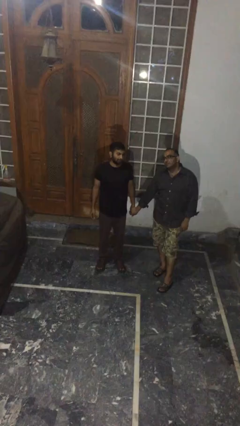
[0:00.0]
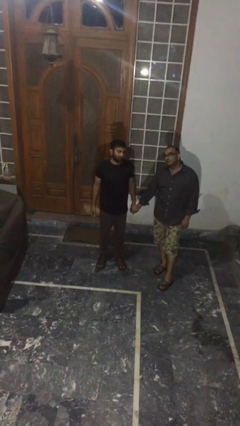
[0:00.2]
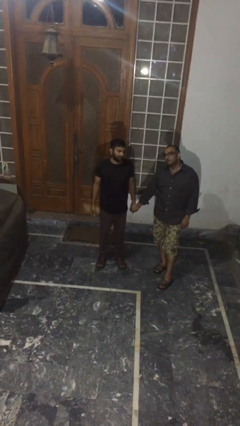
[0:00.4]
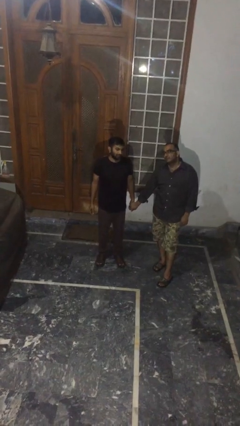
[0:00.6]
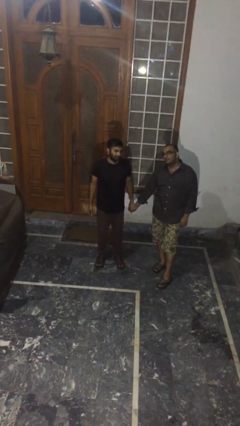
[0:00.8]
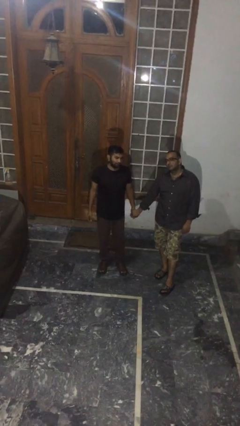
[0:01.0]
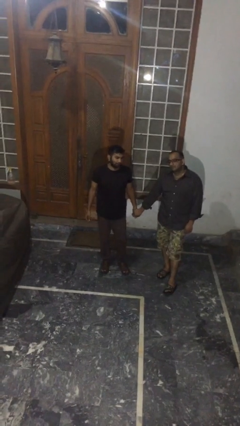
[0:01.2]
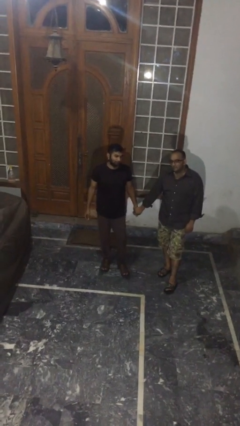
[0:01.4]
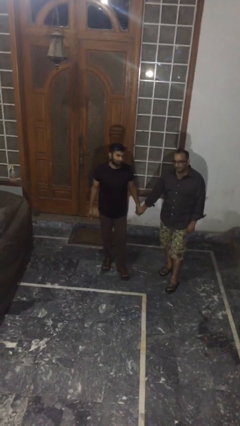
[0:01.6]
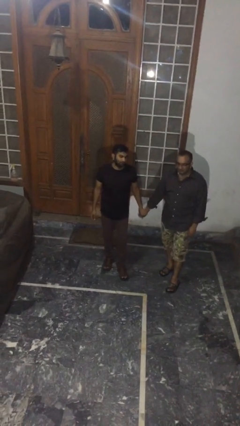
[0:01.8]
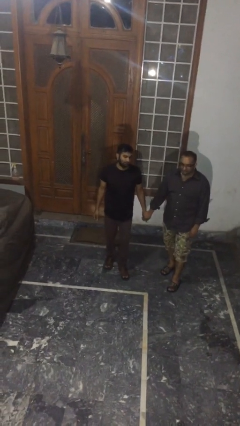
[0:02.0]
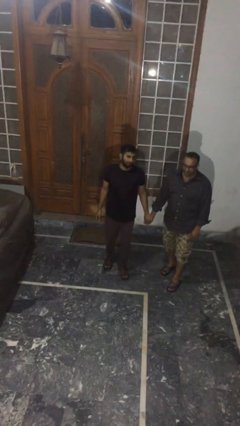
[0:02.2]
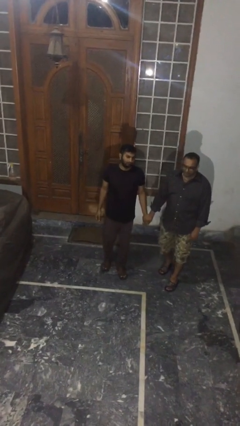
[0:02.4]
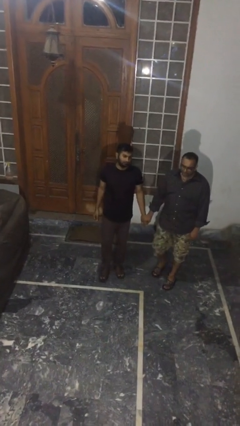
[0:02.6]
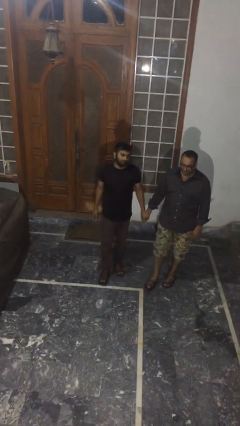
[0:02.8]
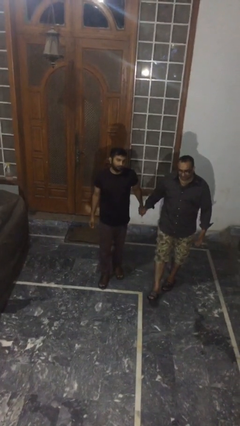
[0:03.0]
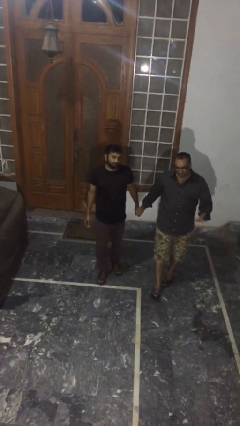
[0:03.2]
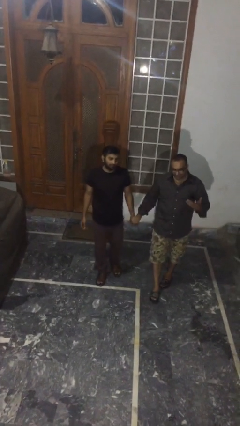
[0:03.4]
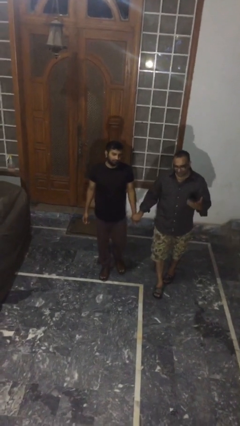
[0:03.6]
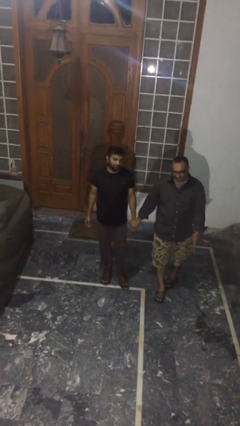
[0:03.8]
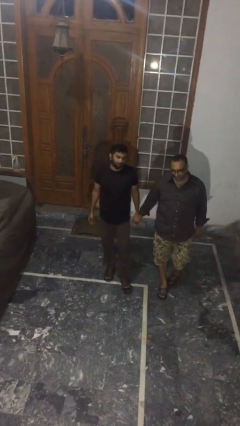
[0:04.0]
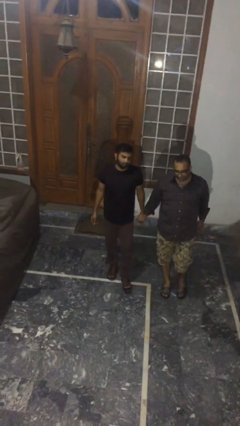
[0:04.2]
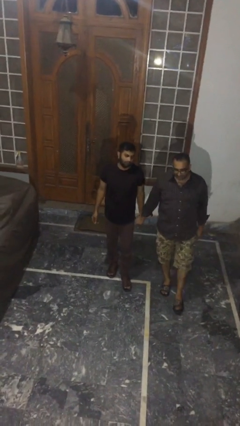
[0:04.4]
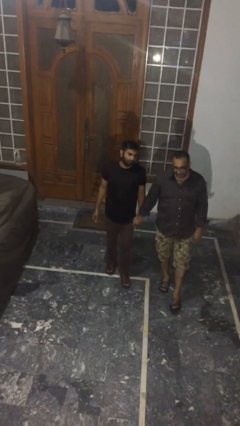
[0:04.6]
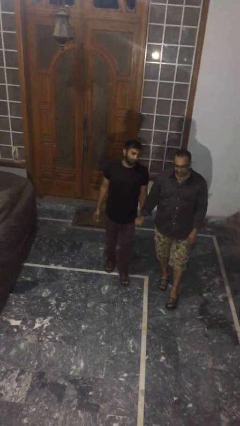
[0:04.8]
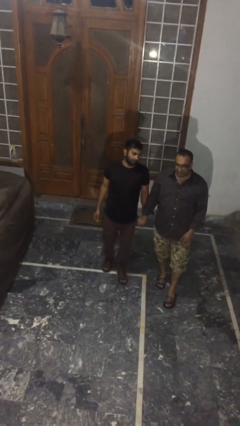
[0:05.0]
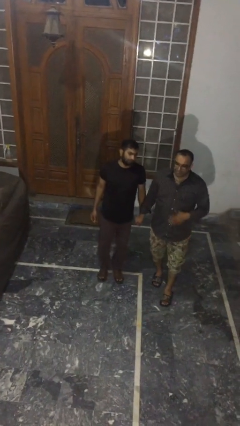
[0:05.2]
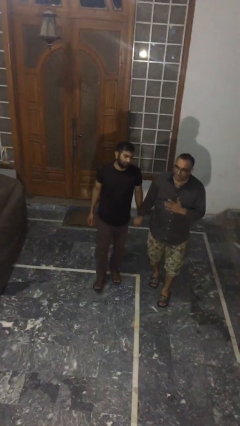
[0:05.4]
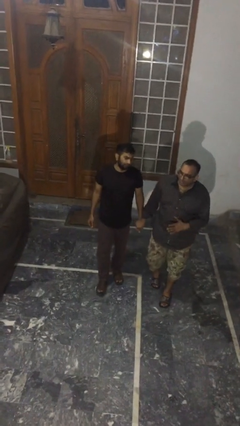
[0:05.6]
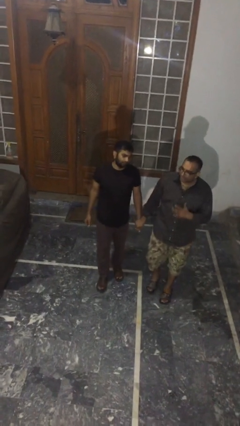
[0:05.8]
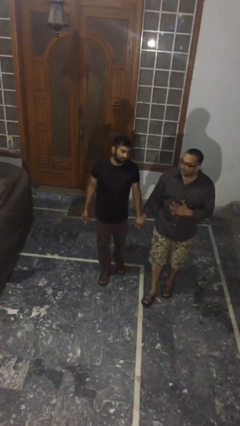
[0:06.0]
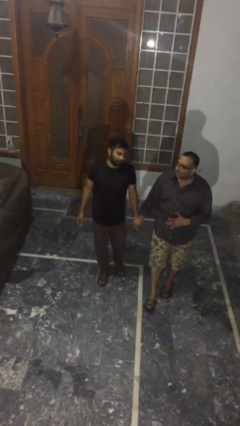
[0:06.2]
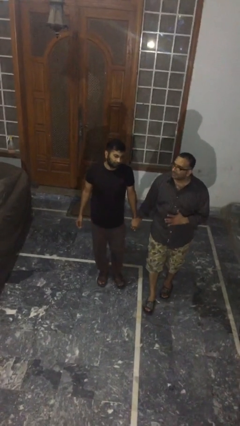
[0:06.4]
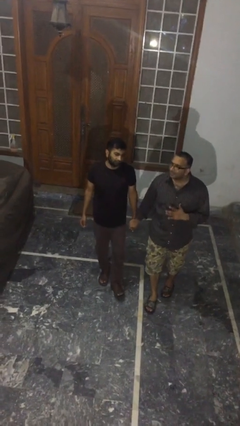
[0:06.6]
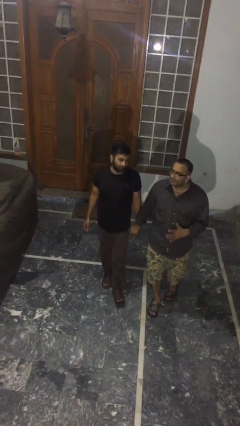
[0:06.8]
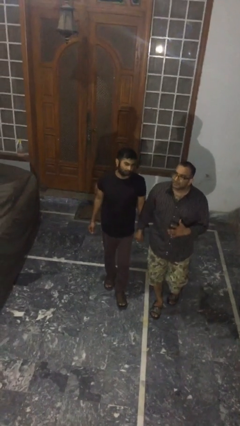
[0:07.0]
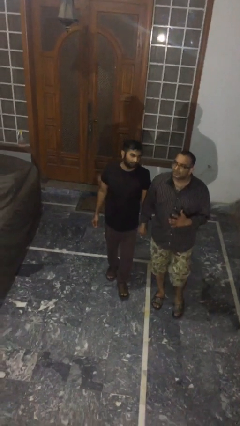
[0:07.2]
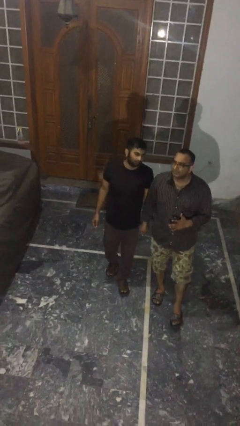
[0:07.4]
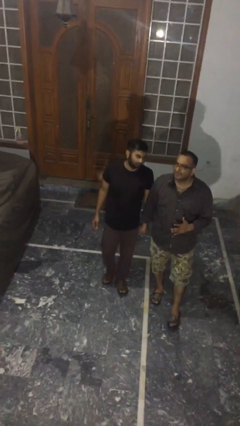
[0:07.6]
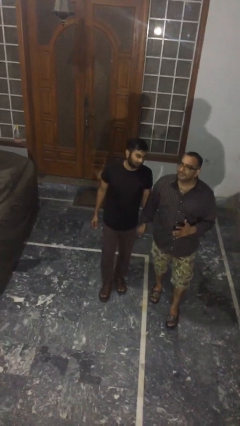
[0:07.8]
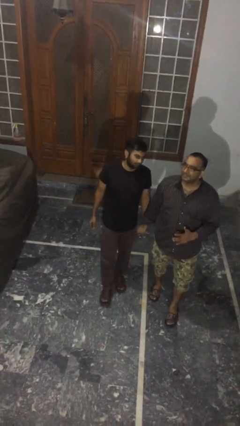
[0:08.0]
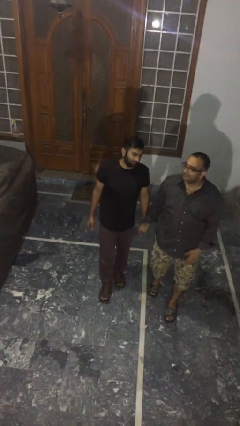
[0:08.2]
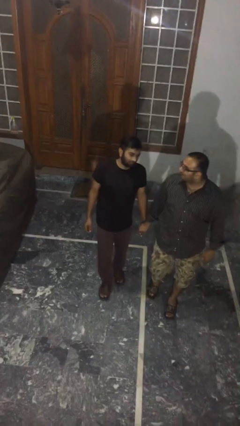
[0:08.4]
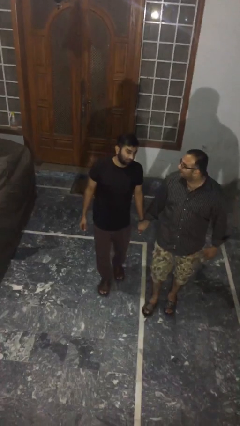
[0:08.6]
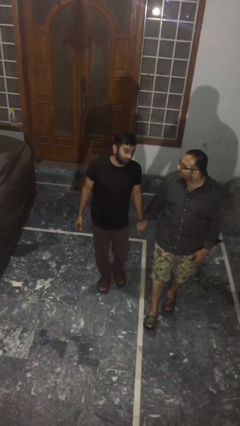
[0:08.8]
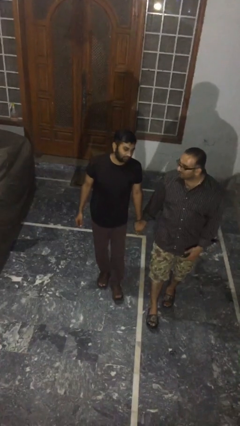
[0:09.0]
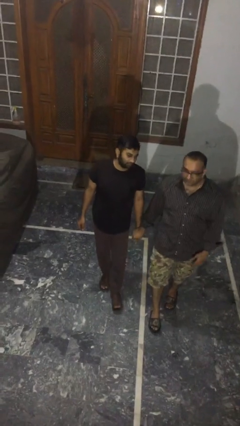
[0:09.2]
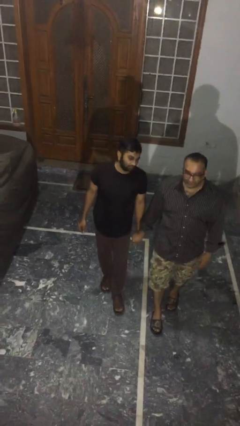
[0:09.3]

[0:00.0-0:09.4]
person holds hand

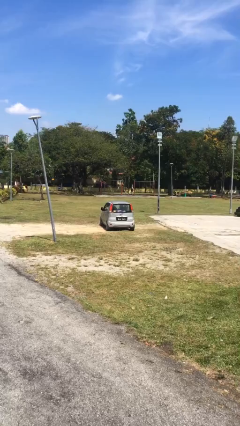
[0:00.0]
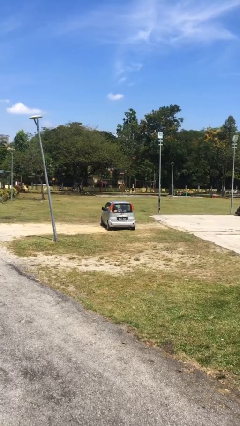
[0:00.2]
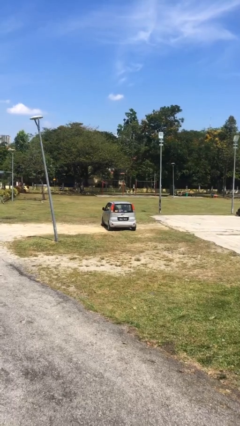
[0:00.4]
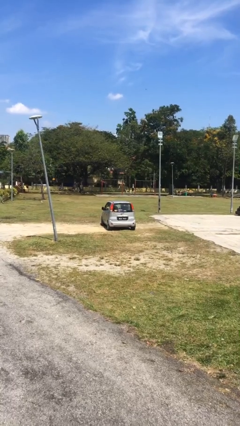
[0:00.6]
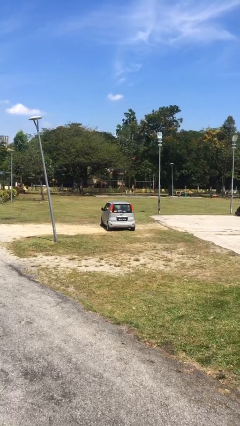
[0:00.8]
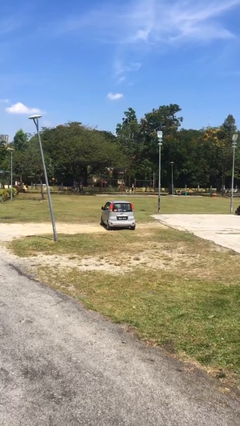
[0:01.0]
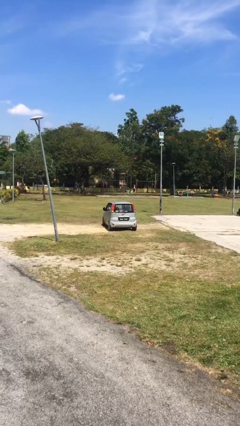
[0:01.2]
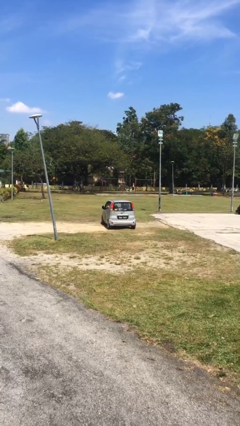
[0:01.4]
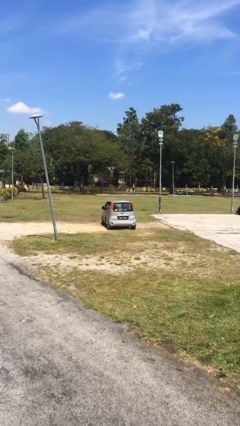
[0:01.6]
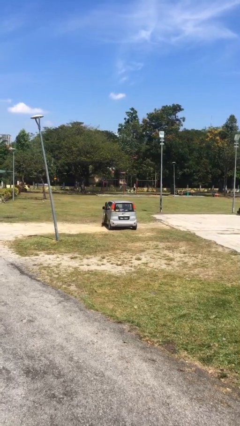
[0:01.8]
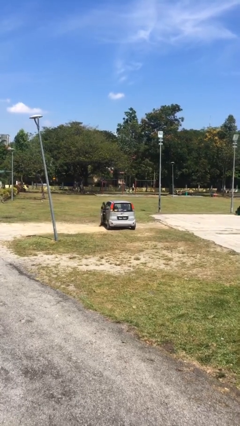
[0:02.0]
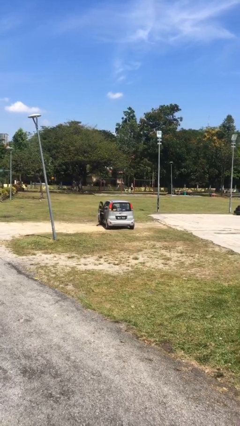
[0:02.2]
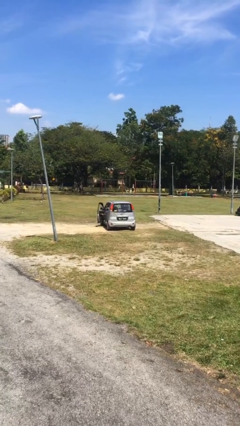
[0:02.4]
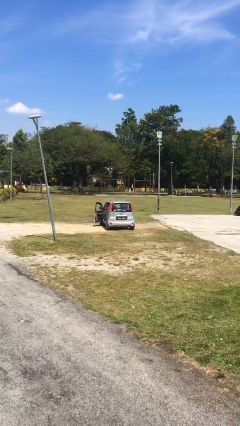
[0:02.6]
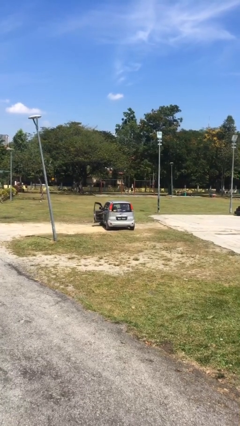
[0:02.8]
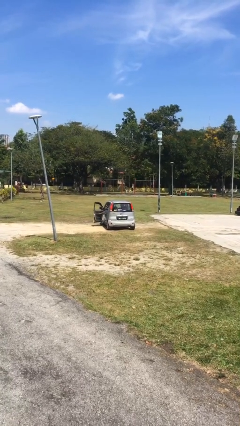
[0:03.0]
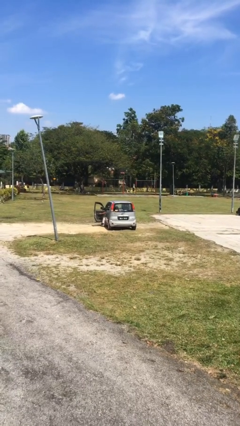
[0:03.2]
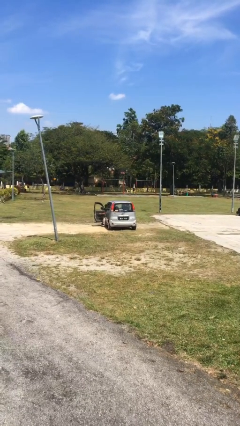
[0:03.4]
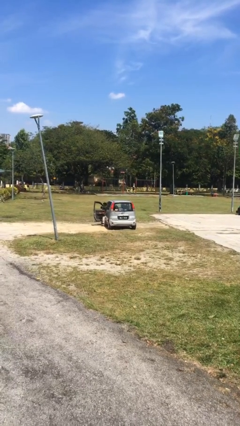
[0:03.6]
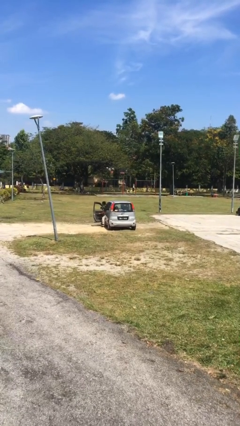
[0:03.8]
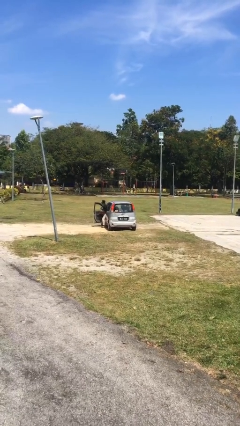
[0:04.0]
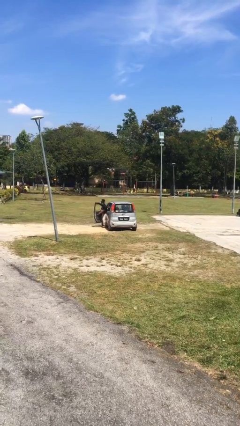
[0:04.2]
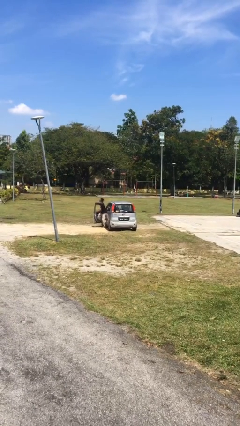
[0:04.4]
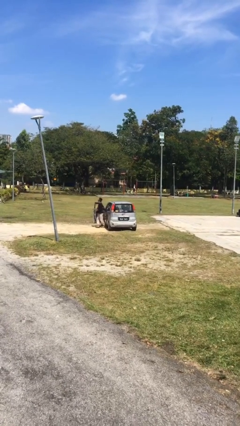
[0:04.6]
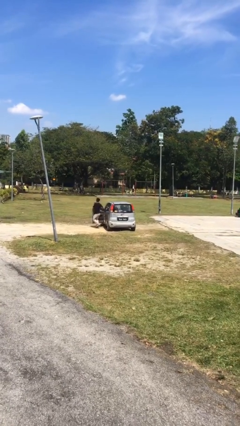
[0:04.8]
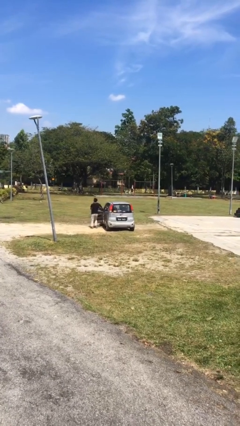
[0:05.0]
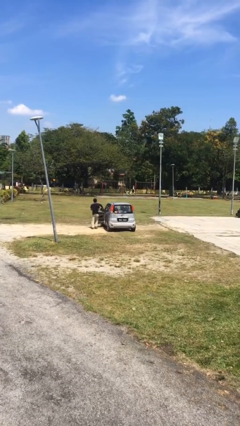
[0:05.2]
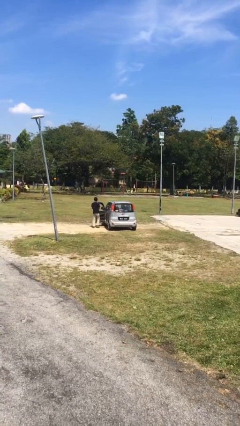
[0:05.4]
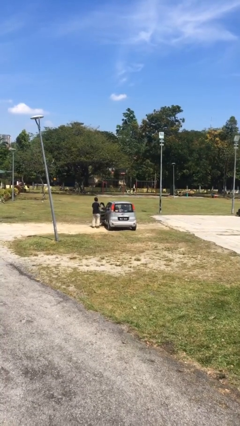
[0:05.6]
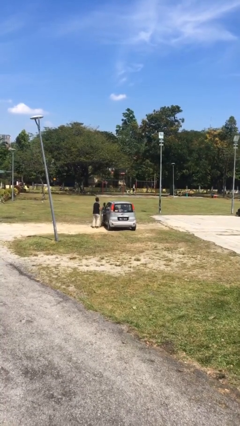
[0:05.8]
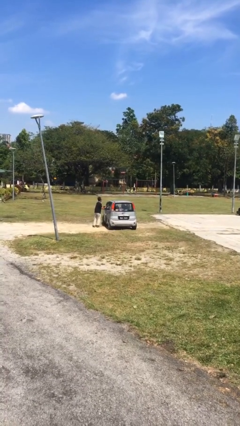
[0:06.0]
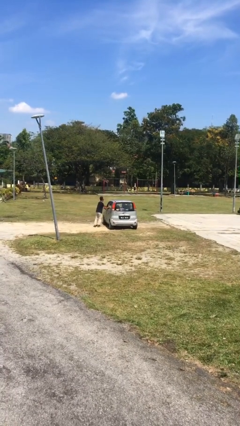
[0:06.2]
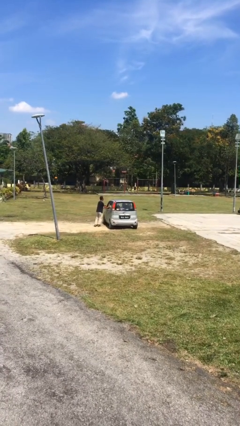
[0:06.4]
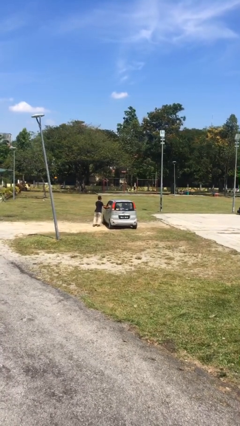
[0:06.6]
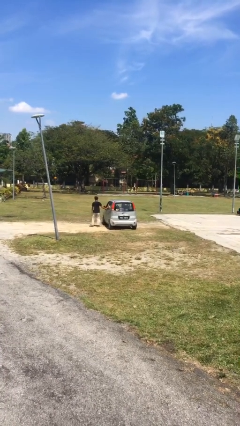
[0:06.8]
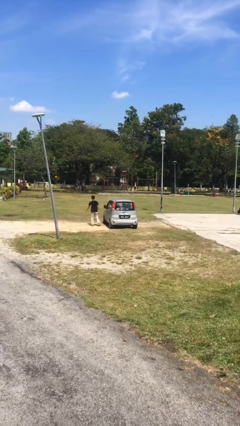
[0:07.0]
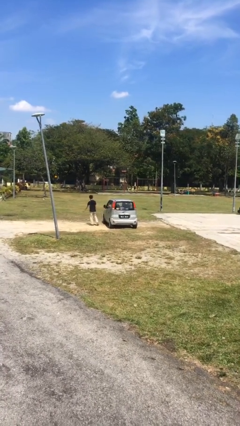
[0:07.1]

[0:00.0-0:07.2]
car drops off person

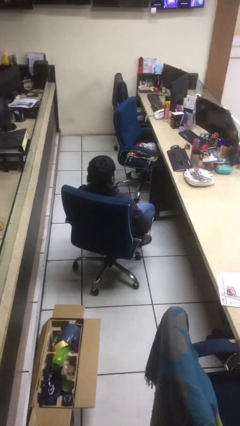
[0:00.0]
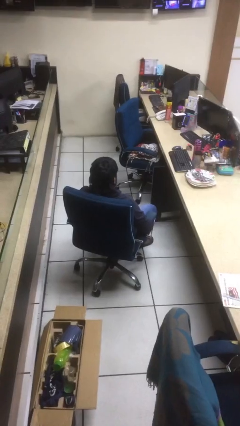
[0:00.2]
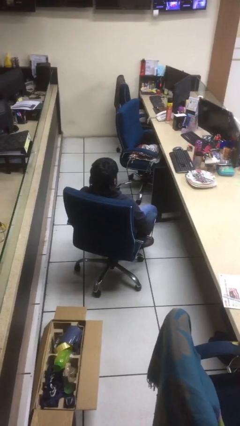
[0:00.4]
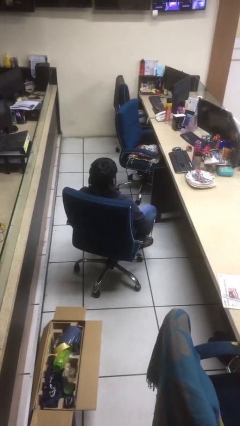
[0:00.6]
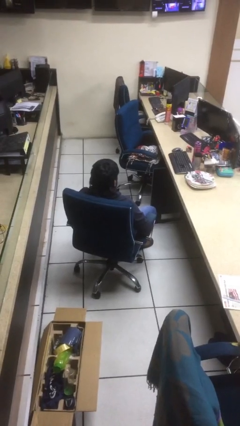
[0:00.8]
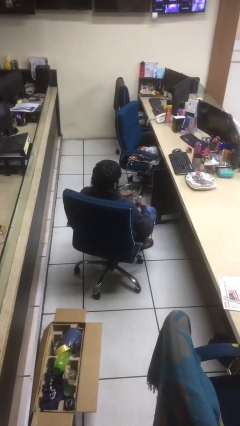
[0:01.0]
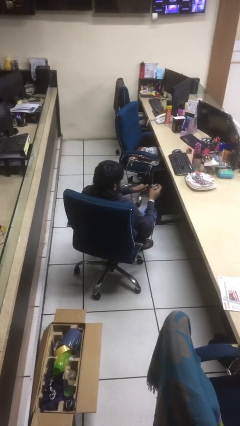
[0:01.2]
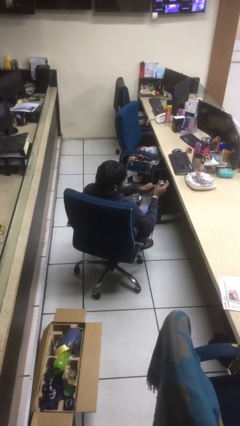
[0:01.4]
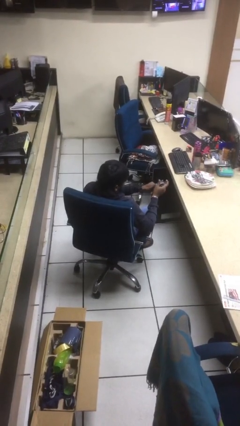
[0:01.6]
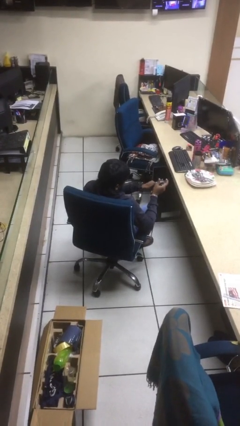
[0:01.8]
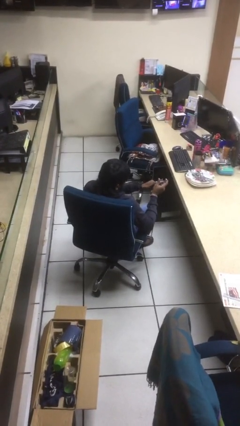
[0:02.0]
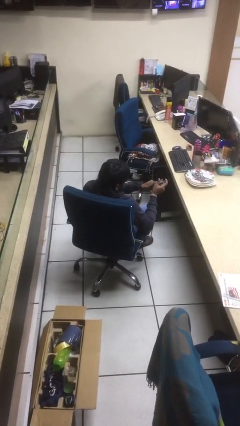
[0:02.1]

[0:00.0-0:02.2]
person clips fingernails
